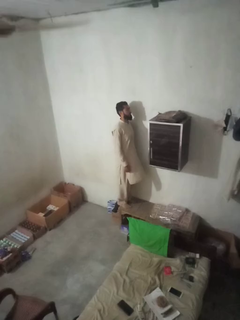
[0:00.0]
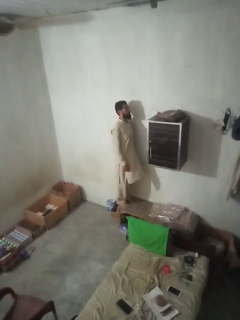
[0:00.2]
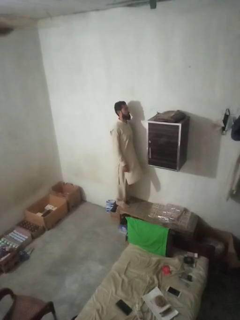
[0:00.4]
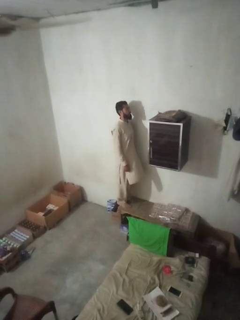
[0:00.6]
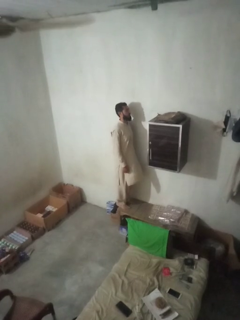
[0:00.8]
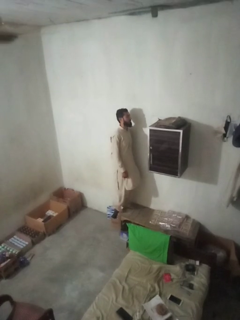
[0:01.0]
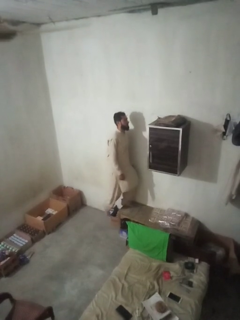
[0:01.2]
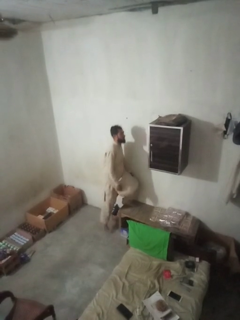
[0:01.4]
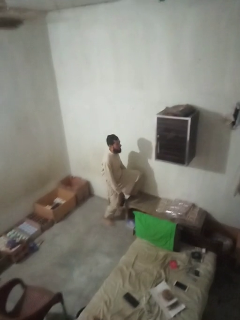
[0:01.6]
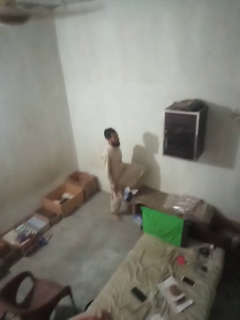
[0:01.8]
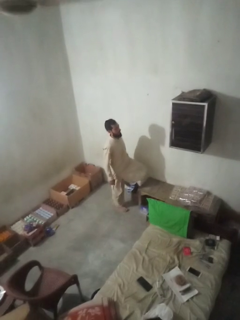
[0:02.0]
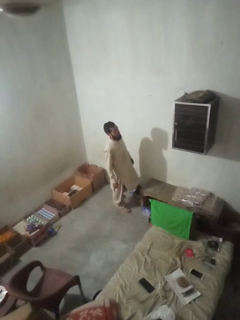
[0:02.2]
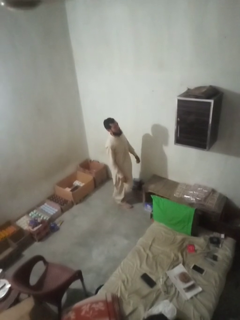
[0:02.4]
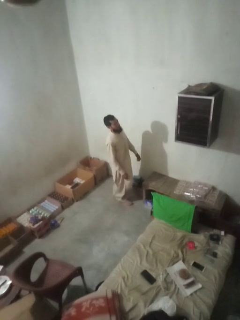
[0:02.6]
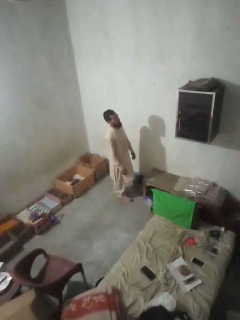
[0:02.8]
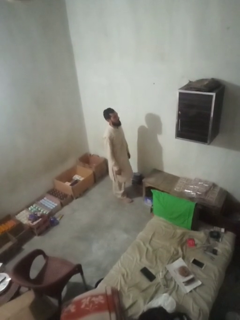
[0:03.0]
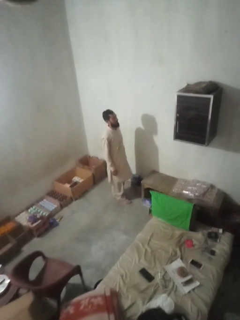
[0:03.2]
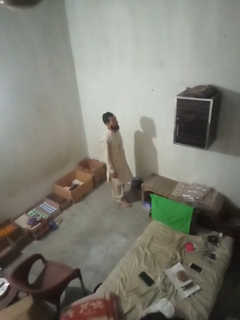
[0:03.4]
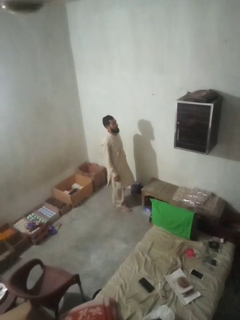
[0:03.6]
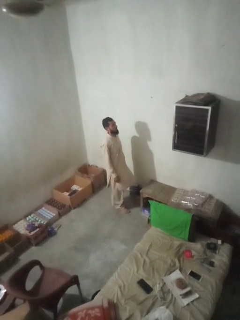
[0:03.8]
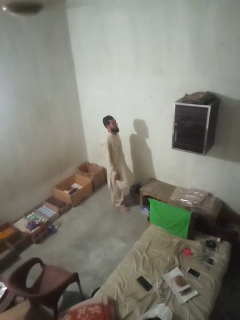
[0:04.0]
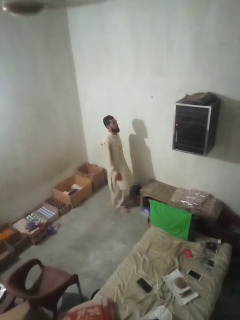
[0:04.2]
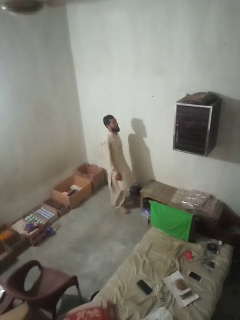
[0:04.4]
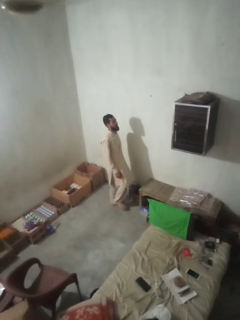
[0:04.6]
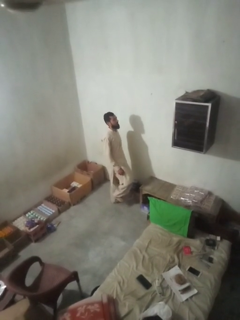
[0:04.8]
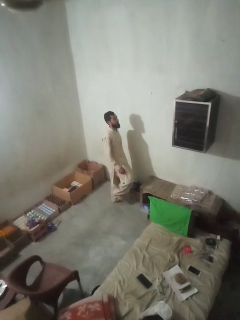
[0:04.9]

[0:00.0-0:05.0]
person climbs off table

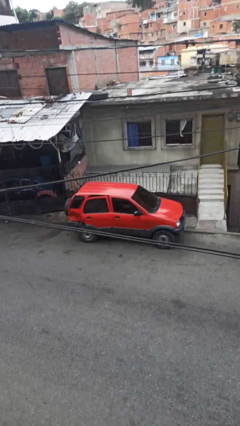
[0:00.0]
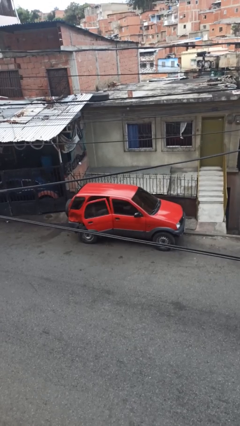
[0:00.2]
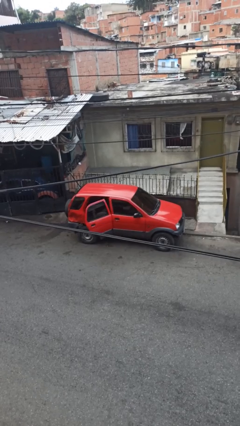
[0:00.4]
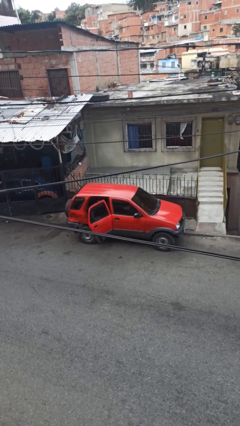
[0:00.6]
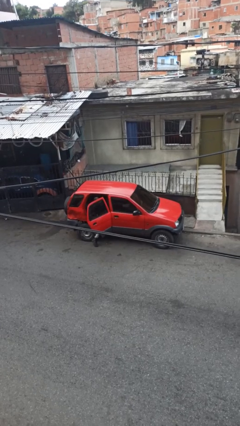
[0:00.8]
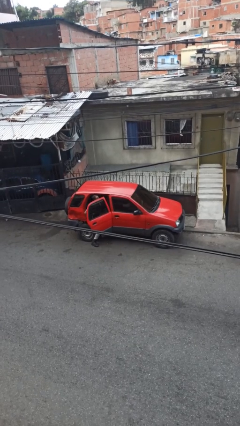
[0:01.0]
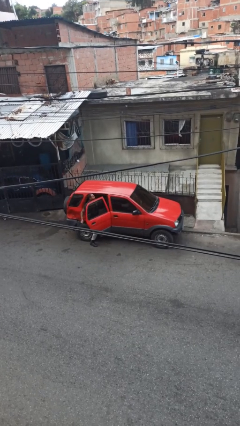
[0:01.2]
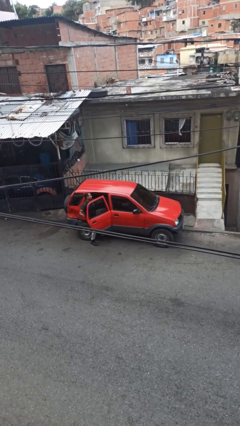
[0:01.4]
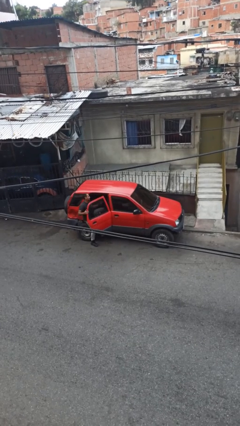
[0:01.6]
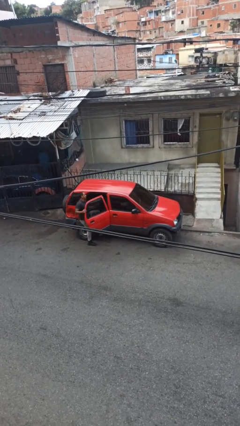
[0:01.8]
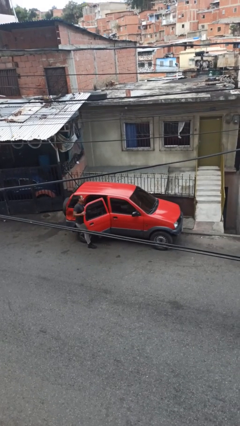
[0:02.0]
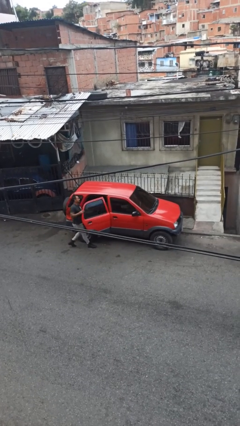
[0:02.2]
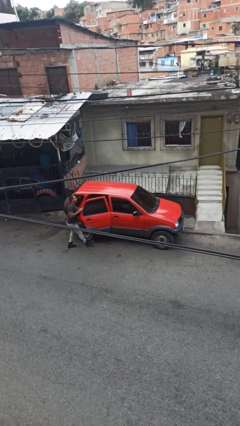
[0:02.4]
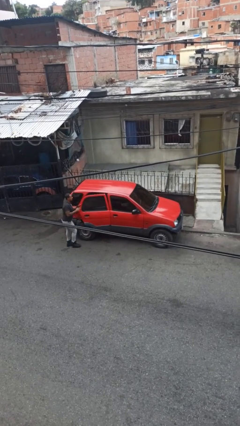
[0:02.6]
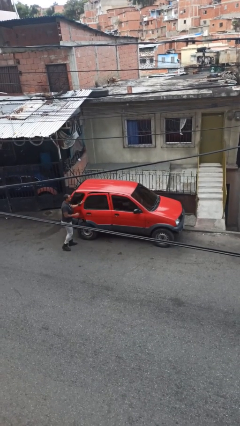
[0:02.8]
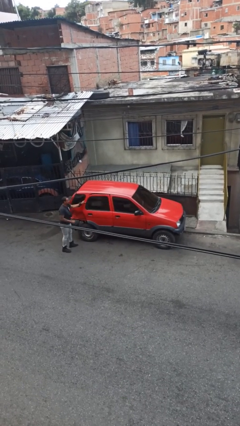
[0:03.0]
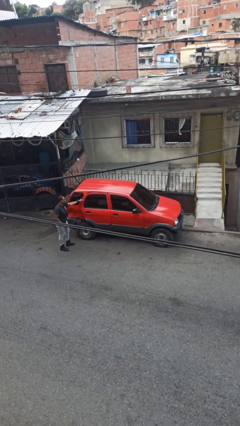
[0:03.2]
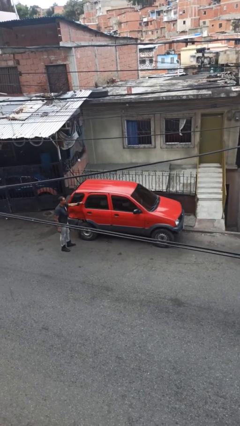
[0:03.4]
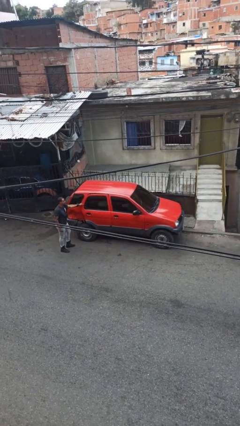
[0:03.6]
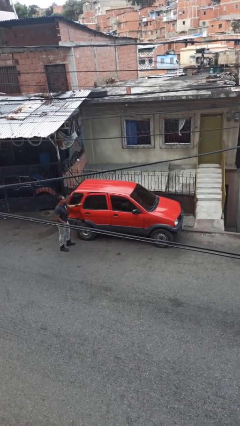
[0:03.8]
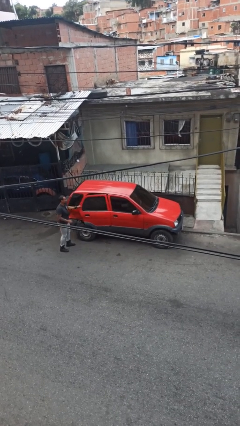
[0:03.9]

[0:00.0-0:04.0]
car drops off person

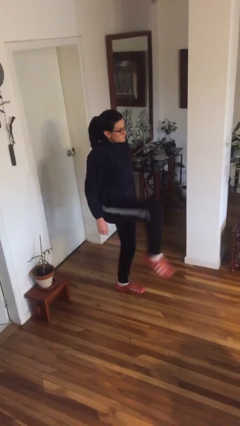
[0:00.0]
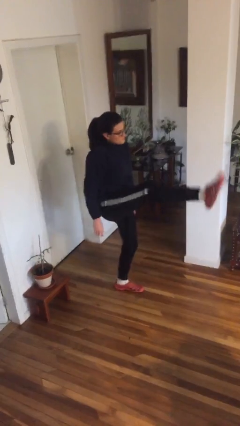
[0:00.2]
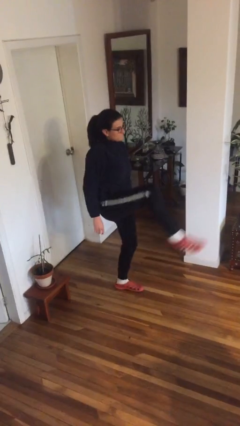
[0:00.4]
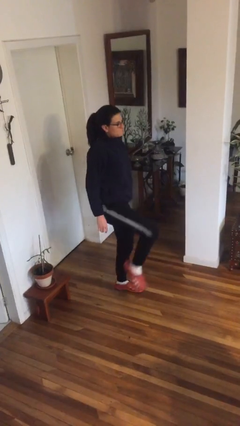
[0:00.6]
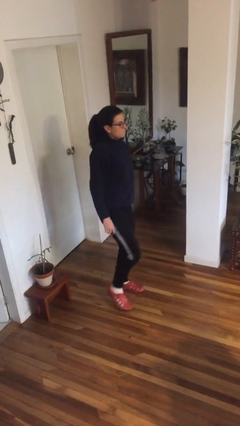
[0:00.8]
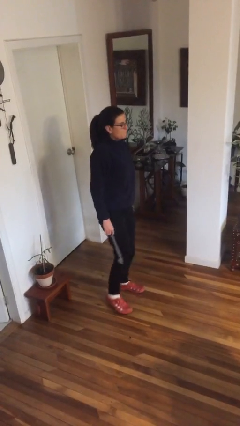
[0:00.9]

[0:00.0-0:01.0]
person karate kicks

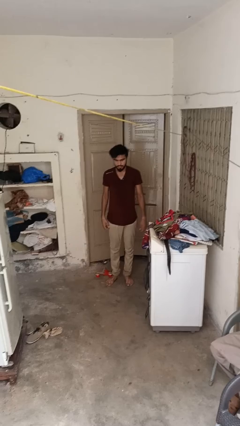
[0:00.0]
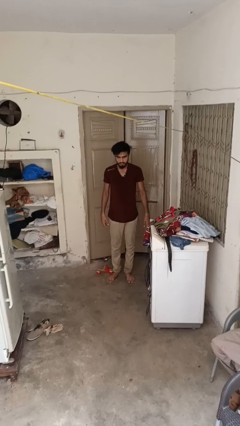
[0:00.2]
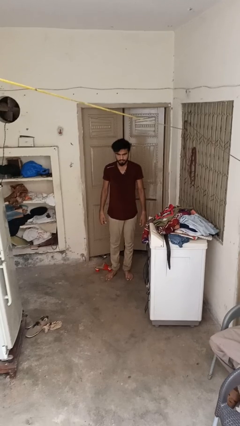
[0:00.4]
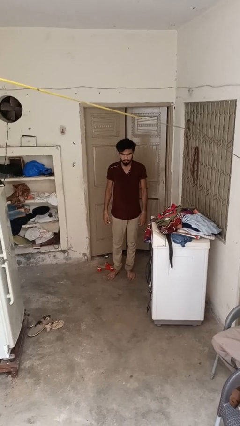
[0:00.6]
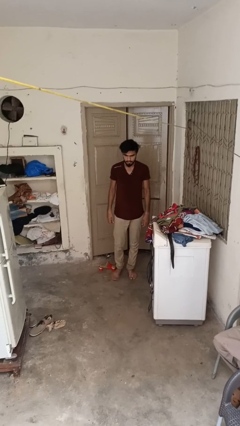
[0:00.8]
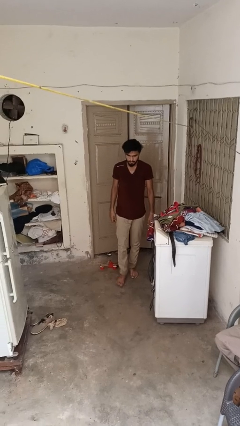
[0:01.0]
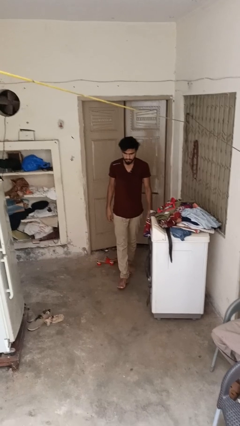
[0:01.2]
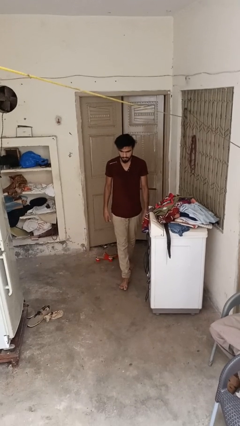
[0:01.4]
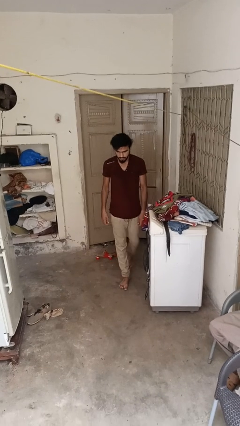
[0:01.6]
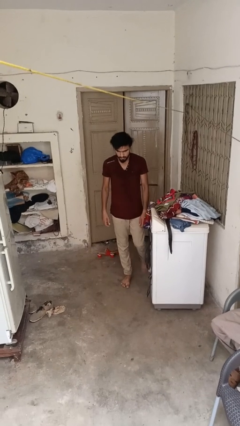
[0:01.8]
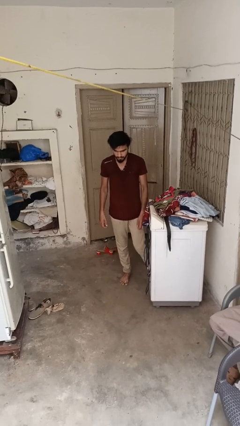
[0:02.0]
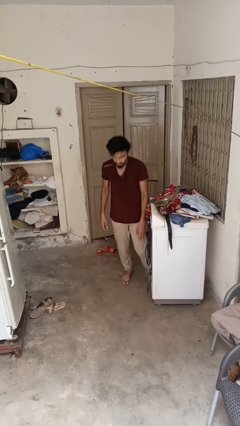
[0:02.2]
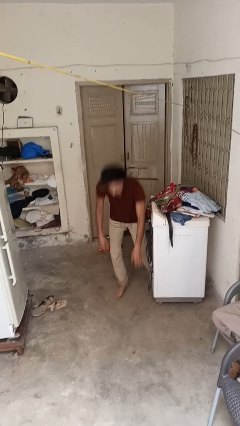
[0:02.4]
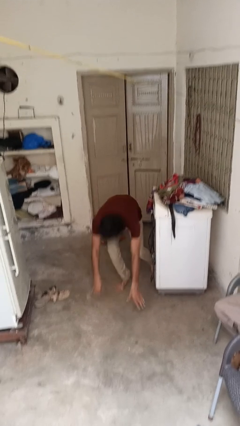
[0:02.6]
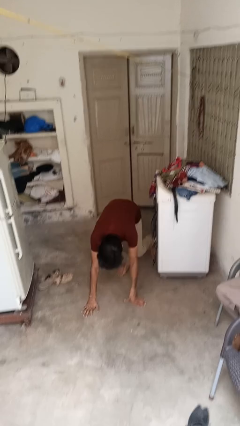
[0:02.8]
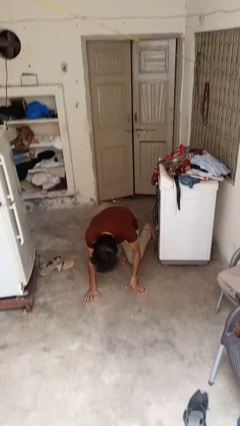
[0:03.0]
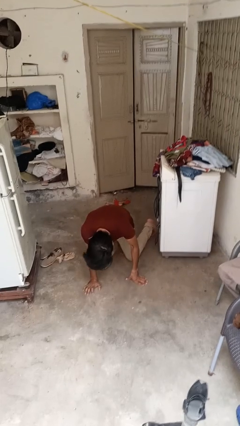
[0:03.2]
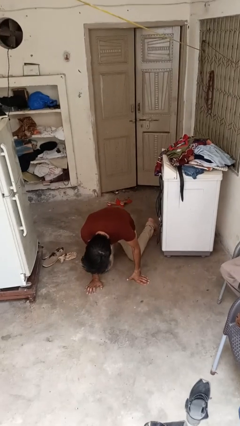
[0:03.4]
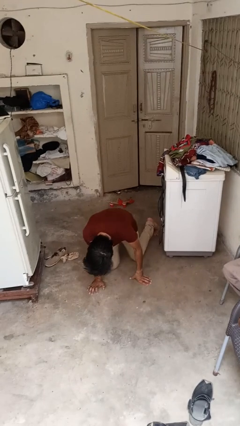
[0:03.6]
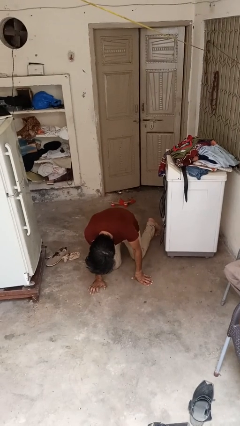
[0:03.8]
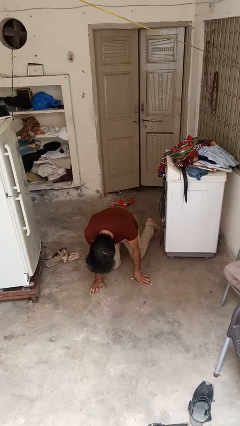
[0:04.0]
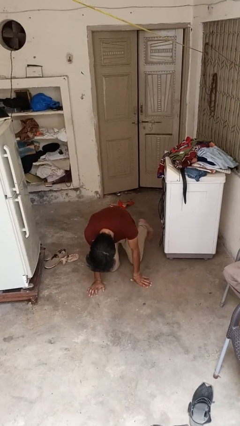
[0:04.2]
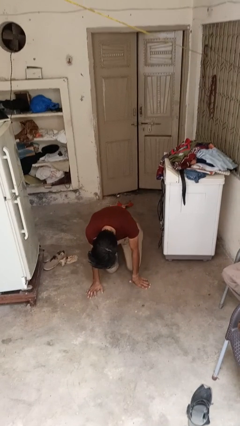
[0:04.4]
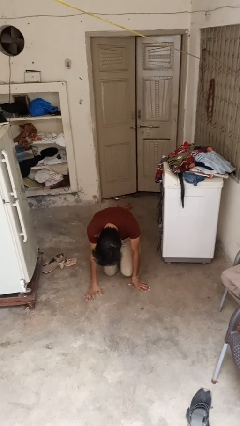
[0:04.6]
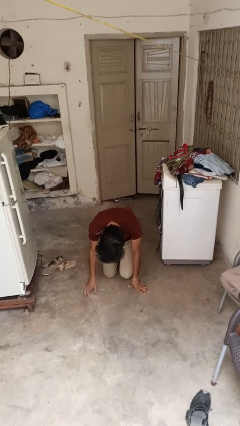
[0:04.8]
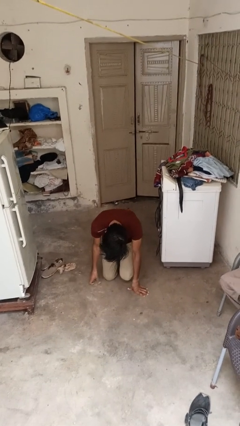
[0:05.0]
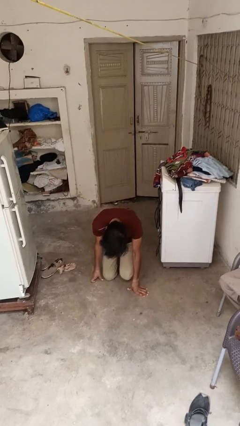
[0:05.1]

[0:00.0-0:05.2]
person trips on object on floor

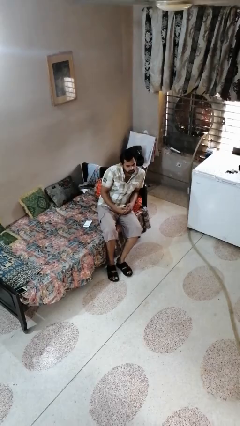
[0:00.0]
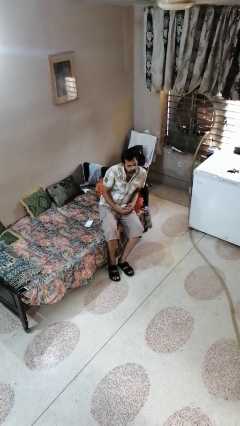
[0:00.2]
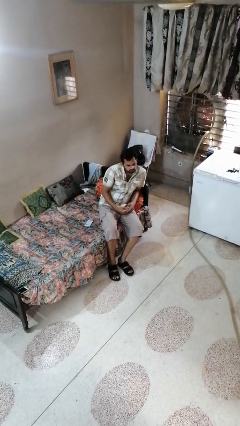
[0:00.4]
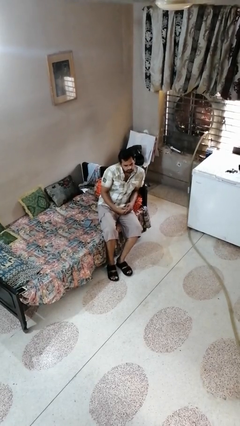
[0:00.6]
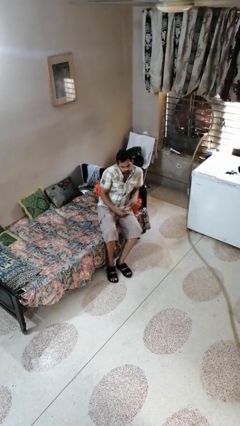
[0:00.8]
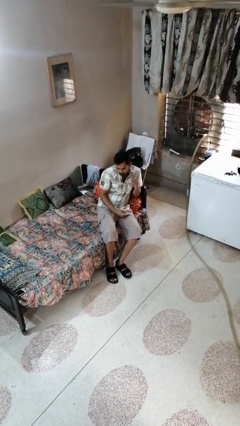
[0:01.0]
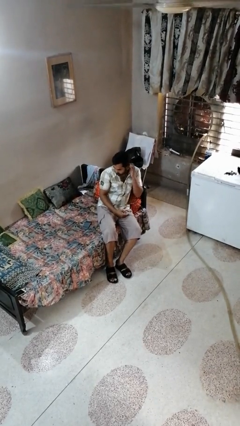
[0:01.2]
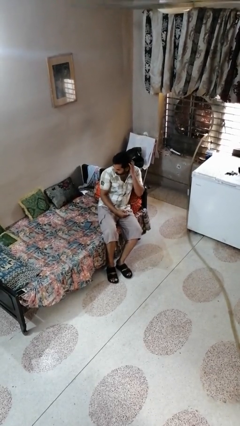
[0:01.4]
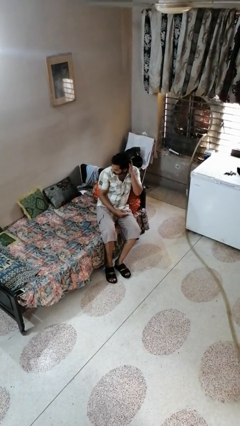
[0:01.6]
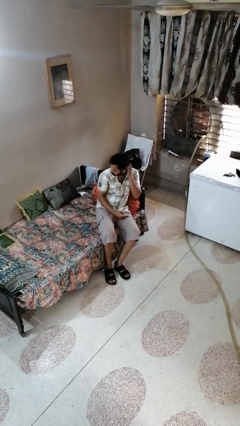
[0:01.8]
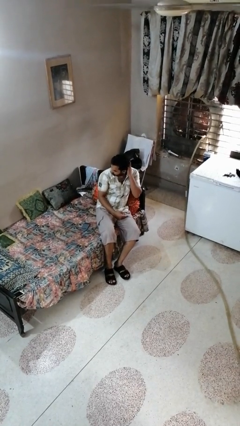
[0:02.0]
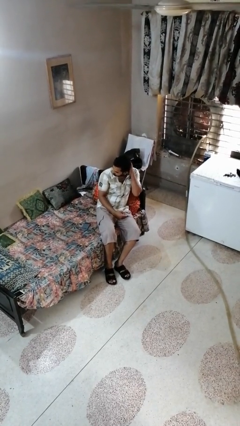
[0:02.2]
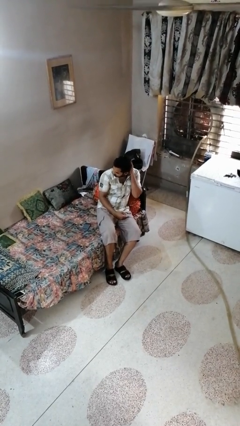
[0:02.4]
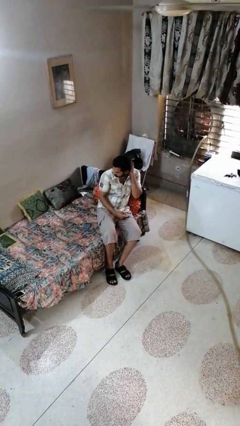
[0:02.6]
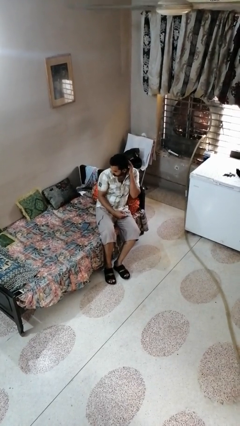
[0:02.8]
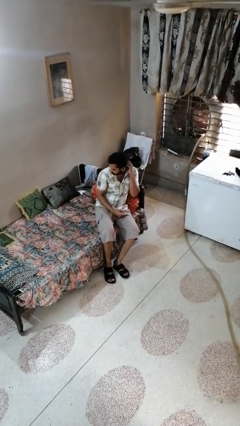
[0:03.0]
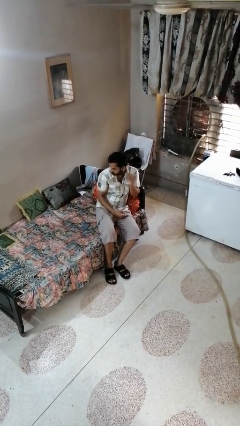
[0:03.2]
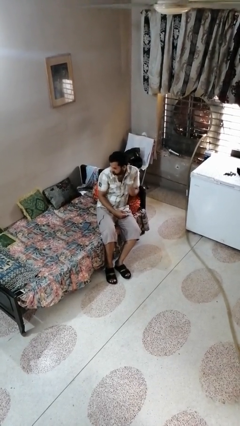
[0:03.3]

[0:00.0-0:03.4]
person scratches face
